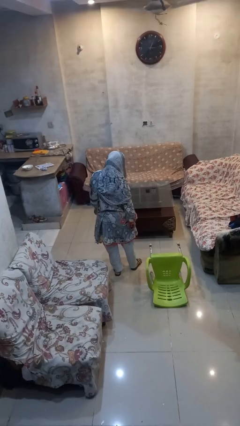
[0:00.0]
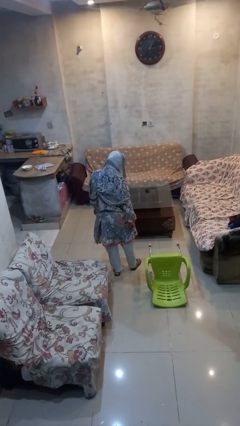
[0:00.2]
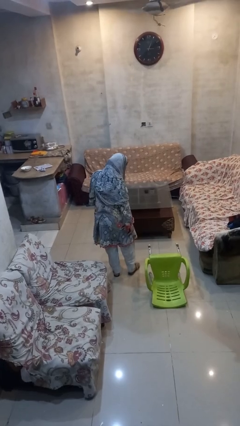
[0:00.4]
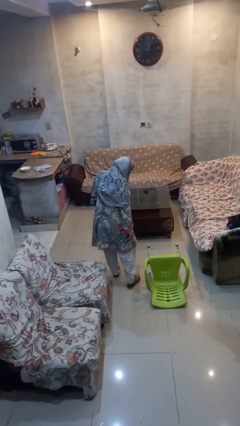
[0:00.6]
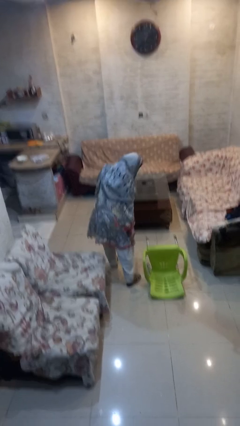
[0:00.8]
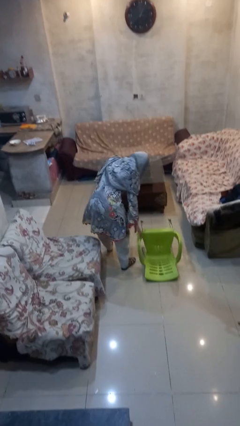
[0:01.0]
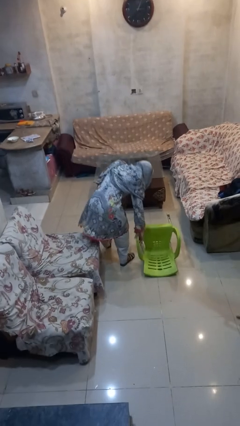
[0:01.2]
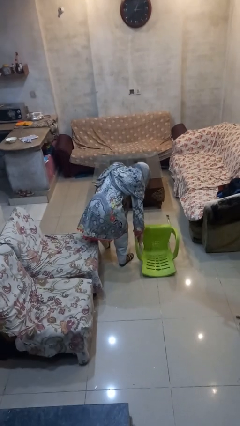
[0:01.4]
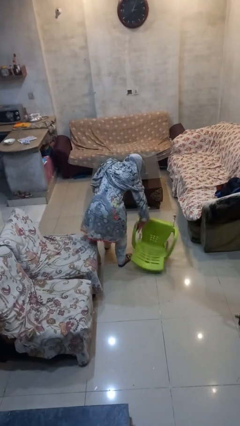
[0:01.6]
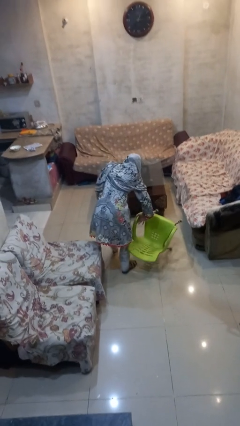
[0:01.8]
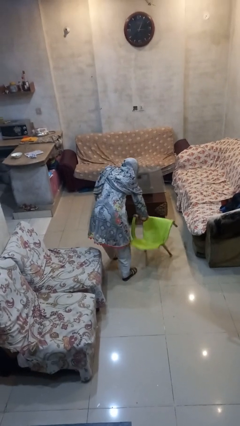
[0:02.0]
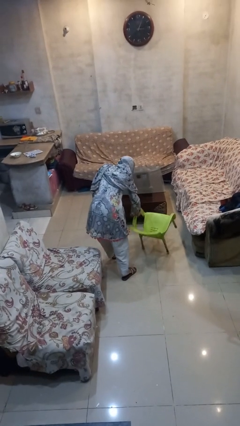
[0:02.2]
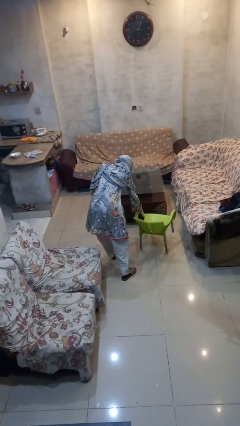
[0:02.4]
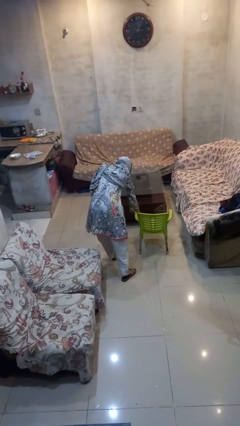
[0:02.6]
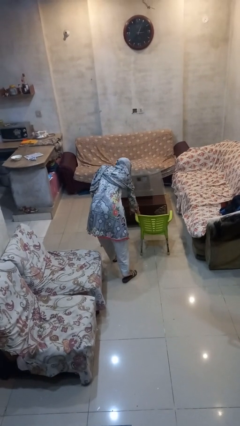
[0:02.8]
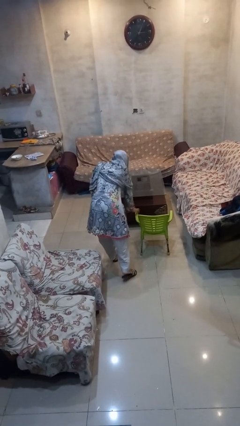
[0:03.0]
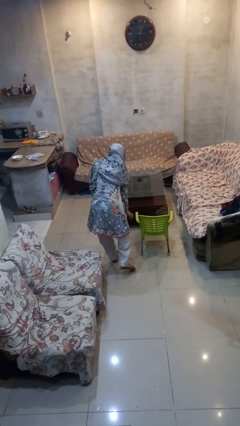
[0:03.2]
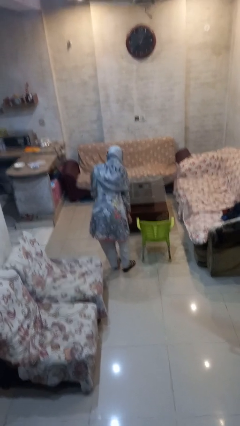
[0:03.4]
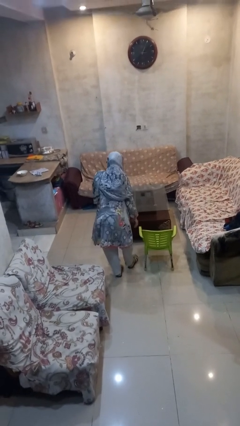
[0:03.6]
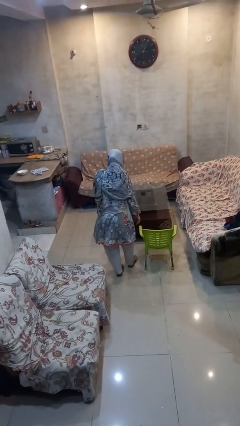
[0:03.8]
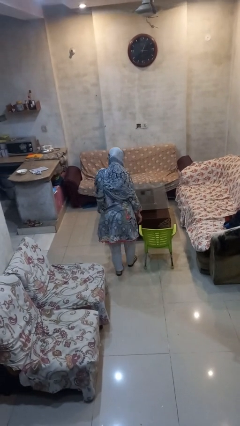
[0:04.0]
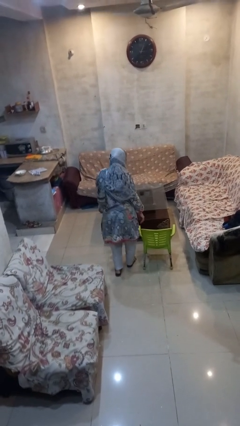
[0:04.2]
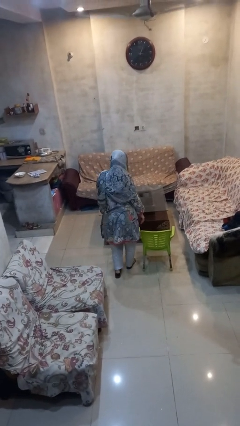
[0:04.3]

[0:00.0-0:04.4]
person sets upright furniture

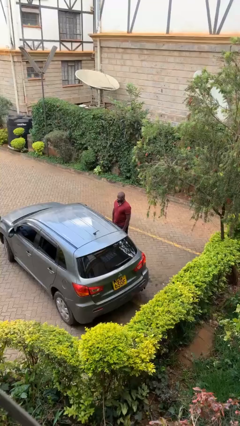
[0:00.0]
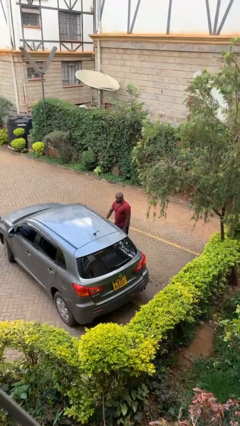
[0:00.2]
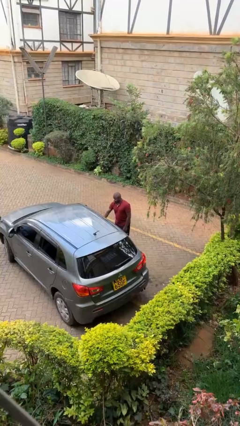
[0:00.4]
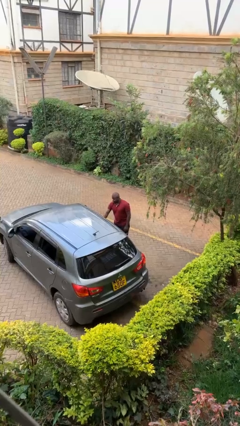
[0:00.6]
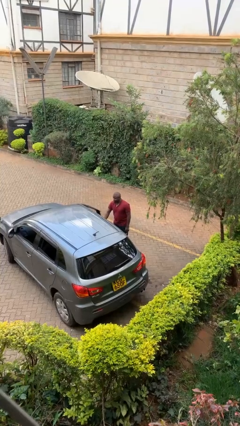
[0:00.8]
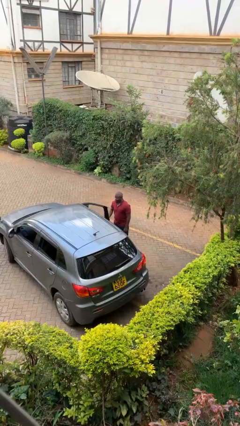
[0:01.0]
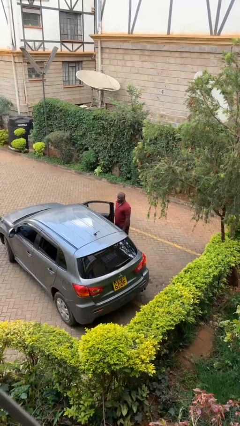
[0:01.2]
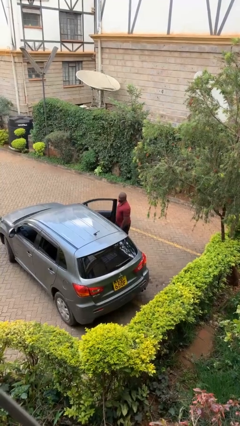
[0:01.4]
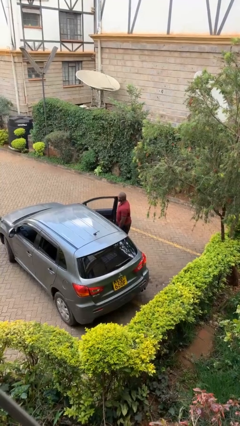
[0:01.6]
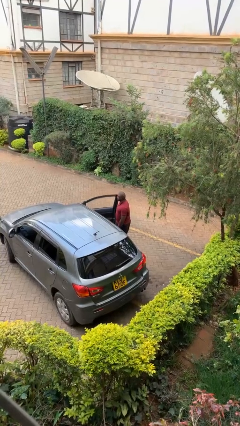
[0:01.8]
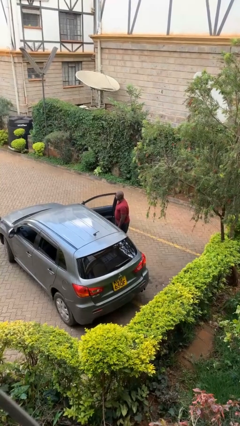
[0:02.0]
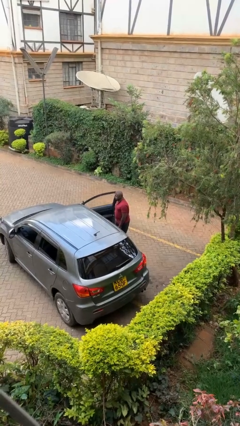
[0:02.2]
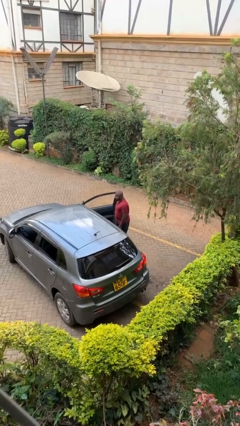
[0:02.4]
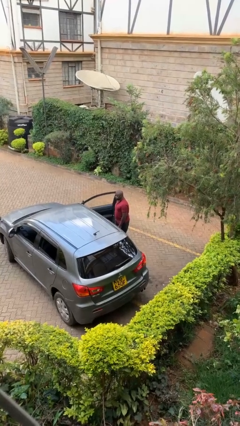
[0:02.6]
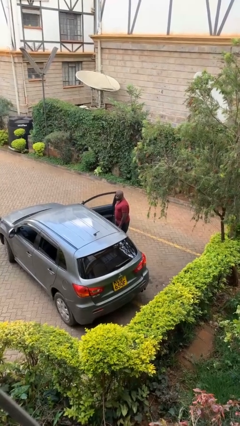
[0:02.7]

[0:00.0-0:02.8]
person opens car door

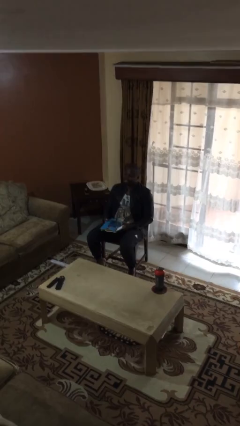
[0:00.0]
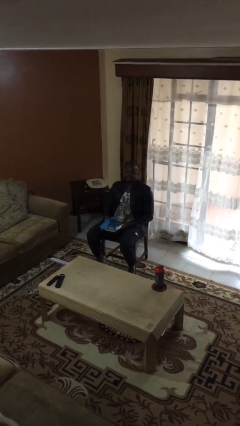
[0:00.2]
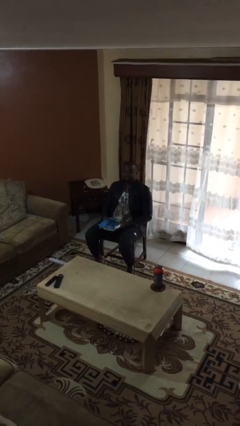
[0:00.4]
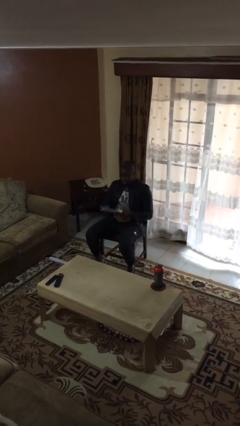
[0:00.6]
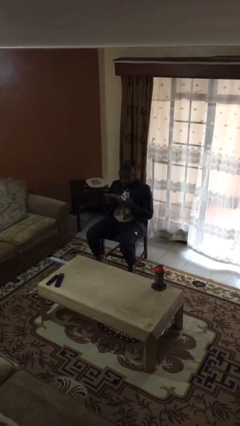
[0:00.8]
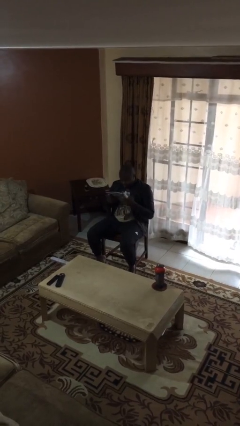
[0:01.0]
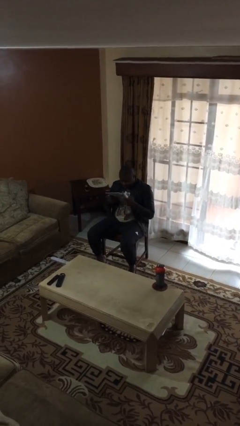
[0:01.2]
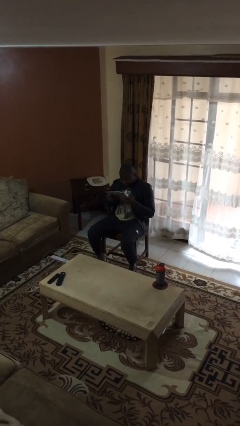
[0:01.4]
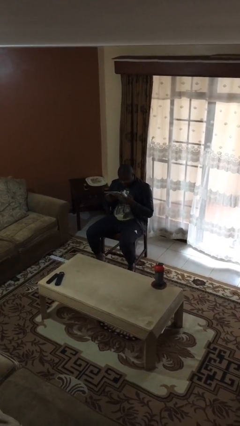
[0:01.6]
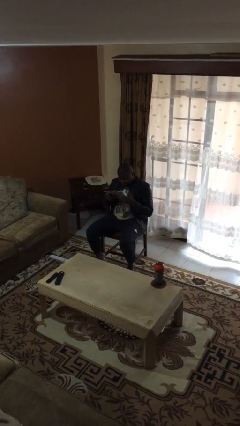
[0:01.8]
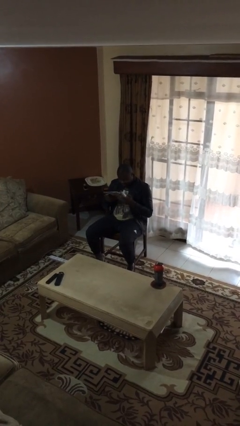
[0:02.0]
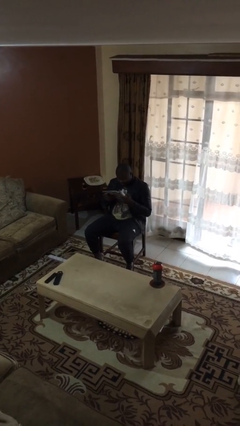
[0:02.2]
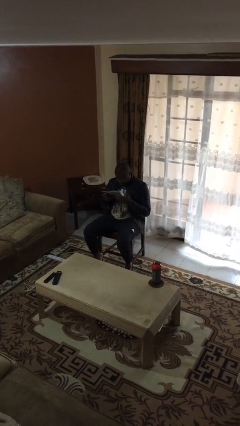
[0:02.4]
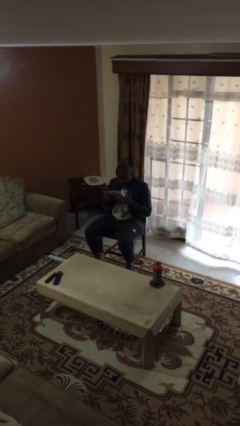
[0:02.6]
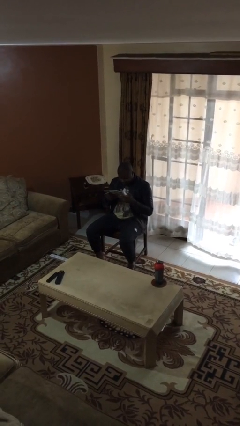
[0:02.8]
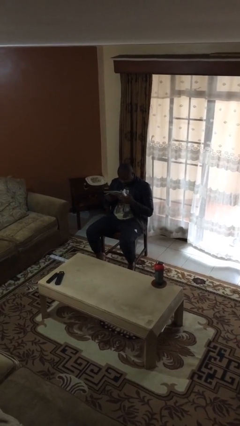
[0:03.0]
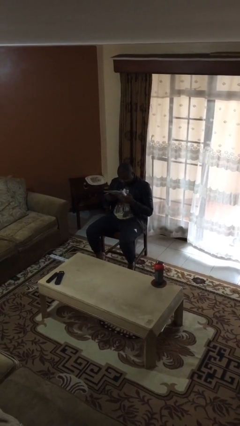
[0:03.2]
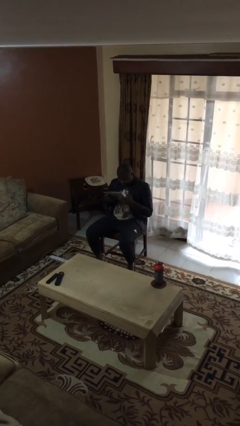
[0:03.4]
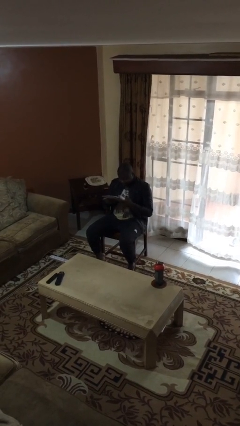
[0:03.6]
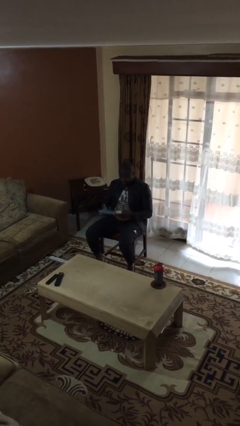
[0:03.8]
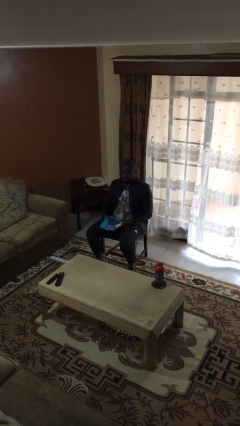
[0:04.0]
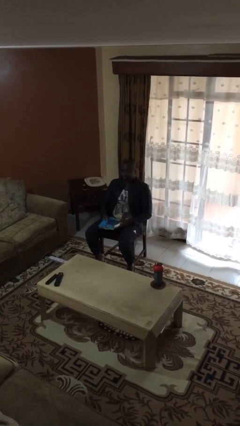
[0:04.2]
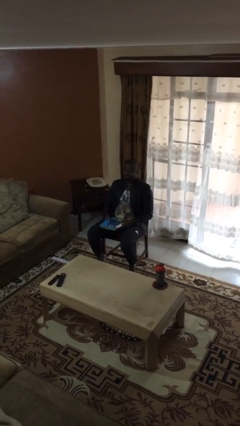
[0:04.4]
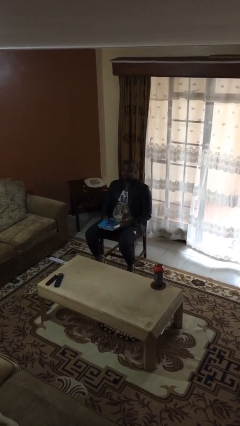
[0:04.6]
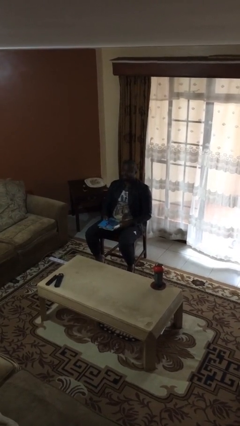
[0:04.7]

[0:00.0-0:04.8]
person reads document

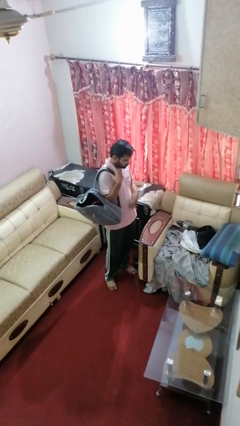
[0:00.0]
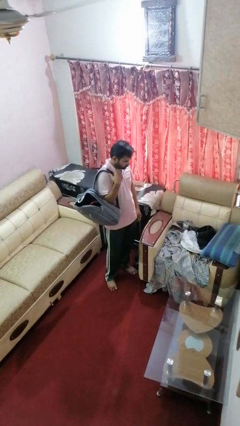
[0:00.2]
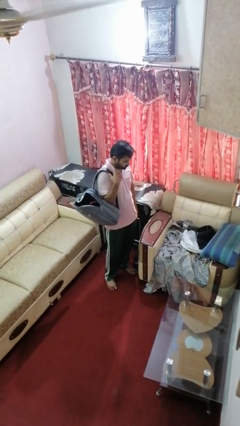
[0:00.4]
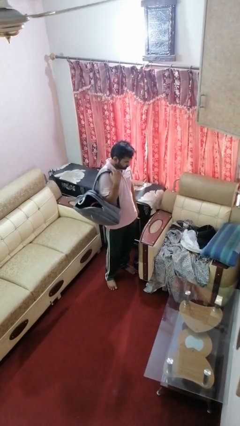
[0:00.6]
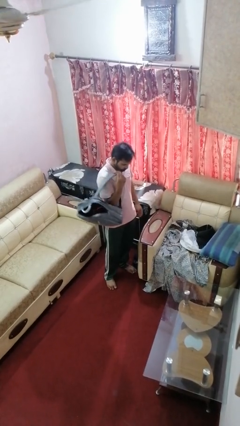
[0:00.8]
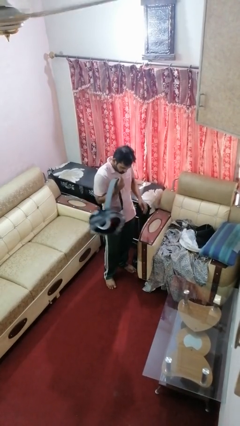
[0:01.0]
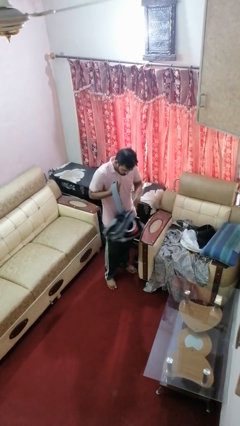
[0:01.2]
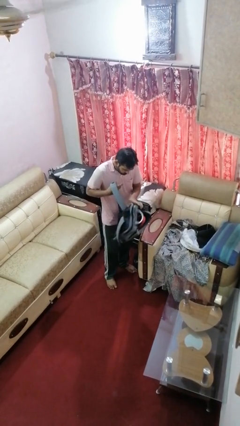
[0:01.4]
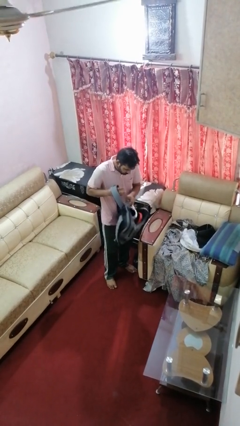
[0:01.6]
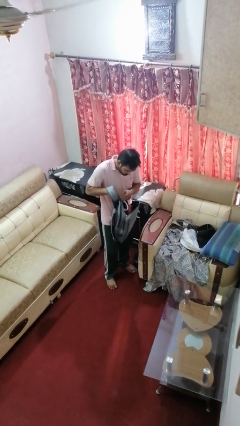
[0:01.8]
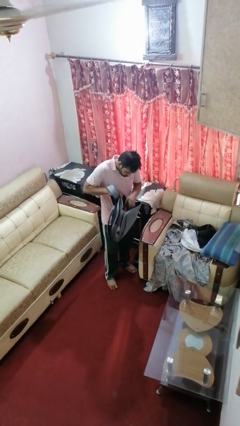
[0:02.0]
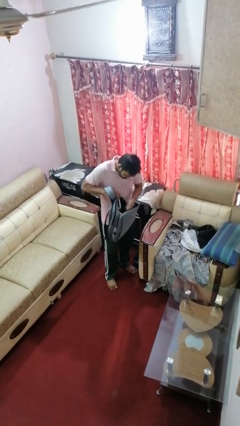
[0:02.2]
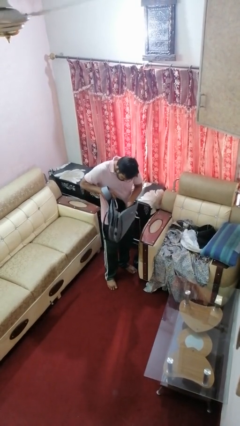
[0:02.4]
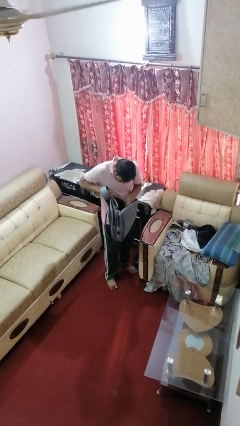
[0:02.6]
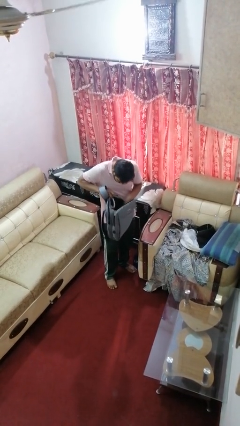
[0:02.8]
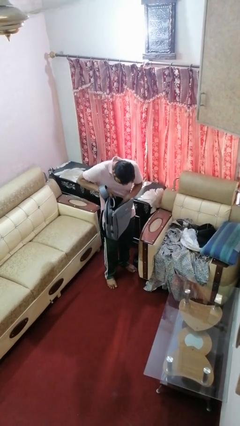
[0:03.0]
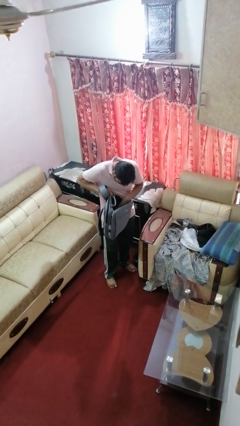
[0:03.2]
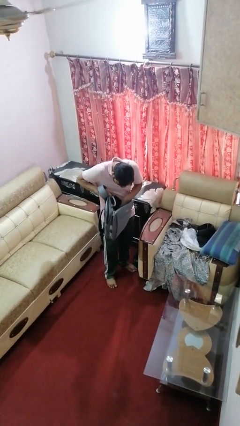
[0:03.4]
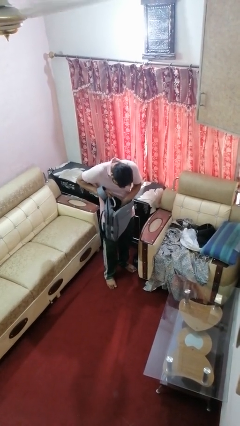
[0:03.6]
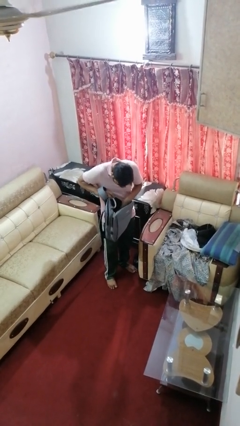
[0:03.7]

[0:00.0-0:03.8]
person searches in backpack
